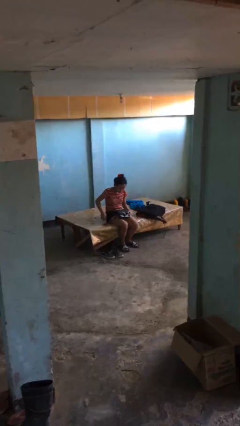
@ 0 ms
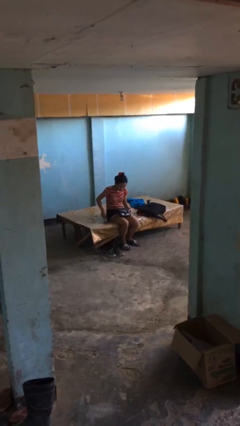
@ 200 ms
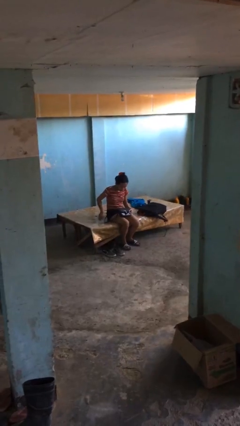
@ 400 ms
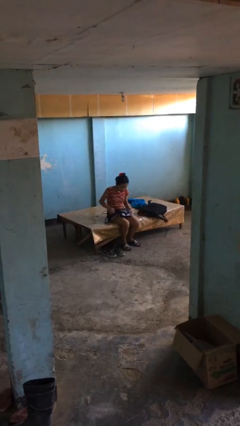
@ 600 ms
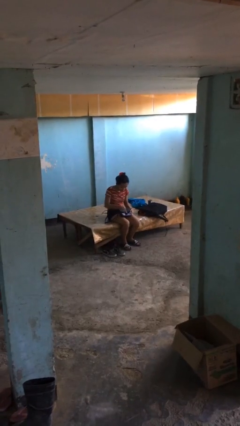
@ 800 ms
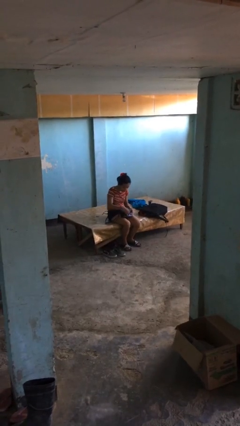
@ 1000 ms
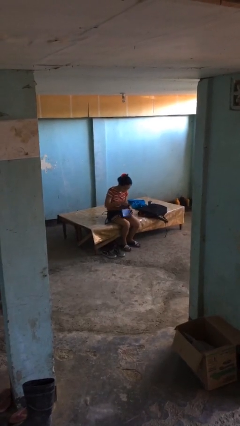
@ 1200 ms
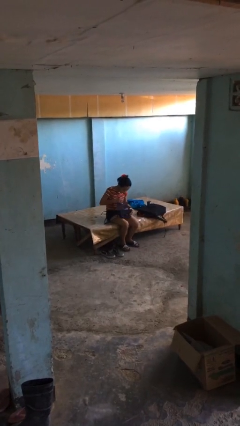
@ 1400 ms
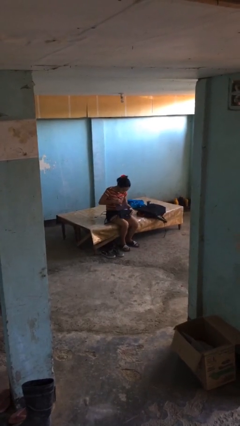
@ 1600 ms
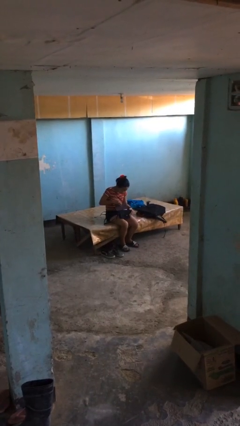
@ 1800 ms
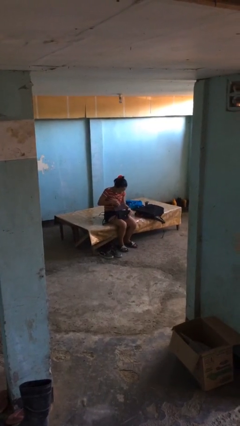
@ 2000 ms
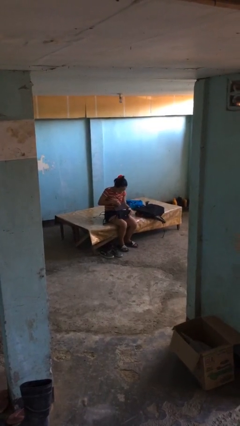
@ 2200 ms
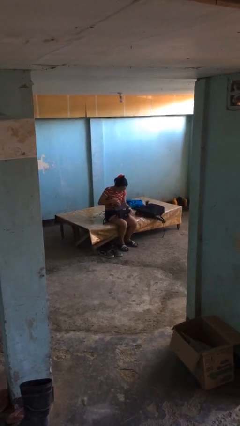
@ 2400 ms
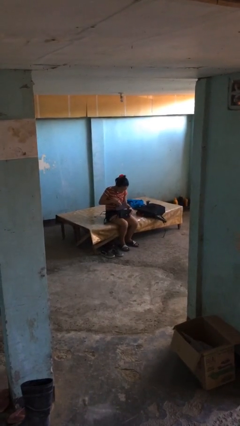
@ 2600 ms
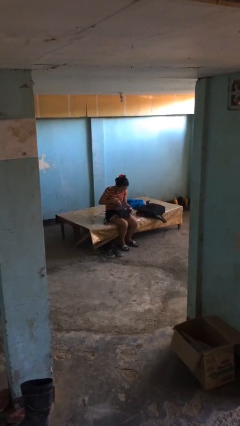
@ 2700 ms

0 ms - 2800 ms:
person searches in purse

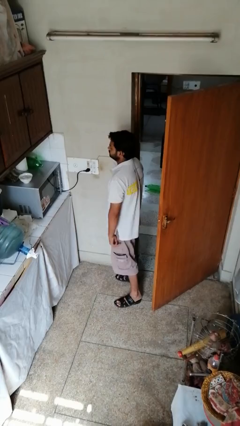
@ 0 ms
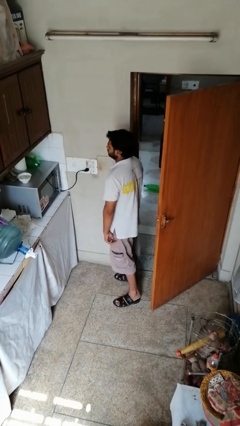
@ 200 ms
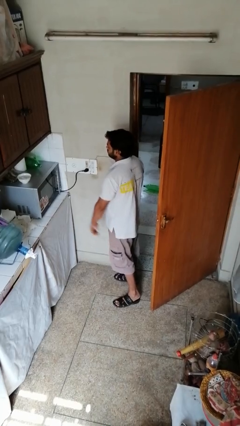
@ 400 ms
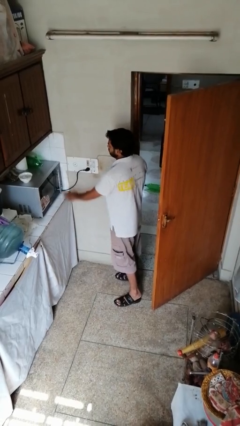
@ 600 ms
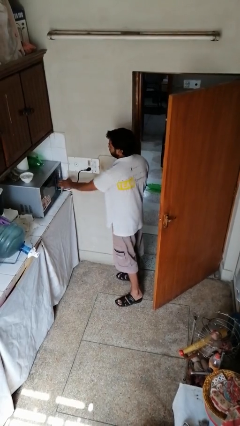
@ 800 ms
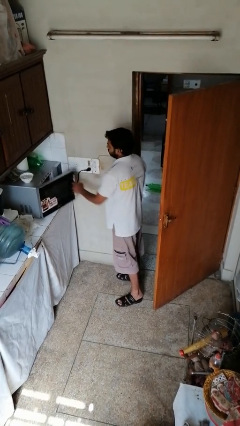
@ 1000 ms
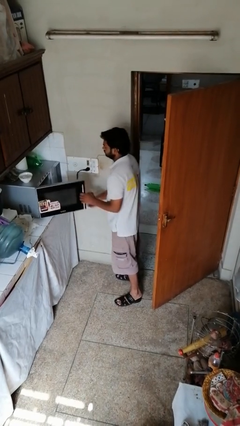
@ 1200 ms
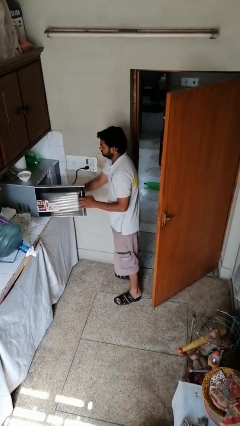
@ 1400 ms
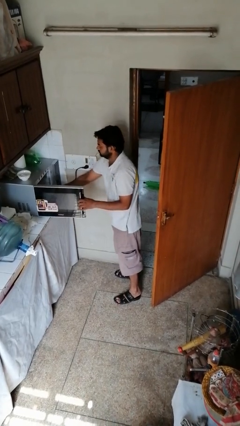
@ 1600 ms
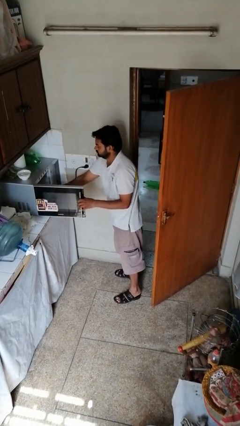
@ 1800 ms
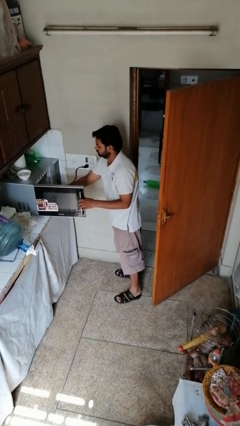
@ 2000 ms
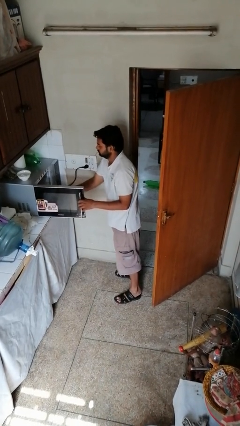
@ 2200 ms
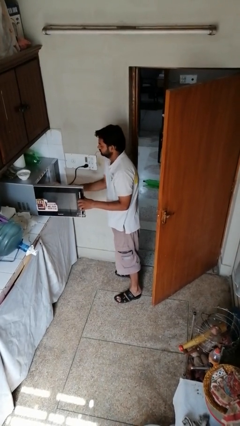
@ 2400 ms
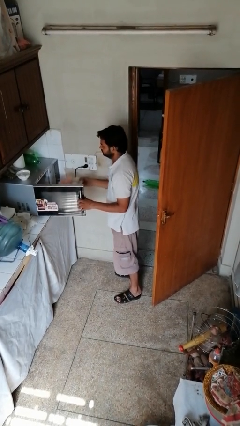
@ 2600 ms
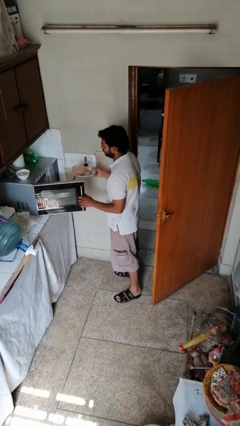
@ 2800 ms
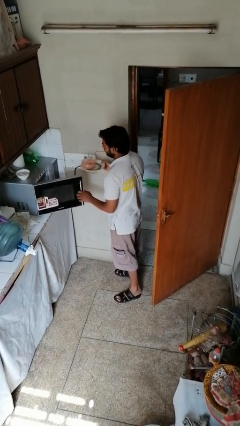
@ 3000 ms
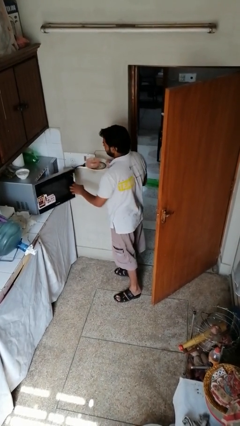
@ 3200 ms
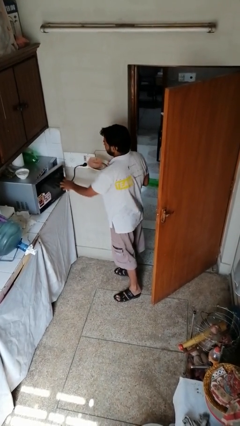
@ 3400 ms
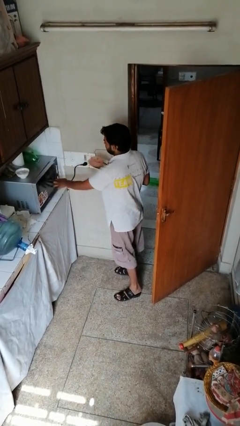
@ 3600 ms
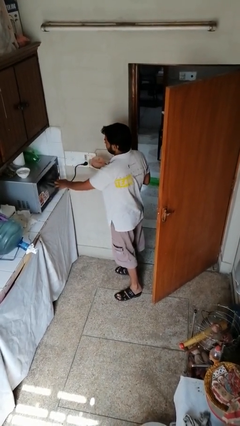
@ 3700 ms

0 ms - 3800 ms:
person takes object from microwave

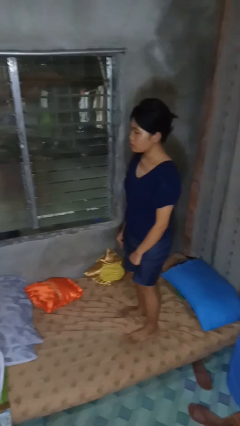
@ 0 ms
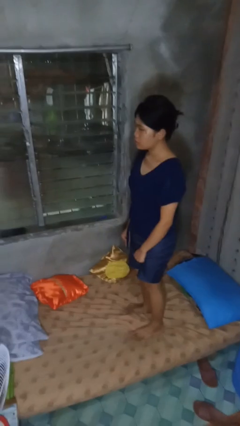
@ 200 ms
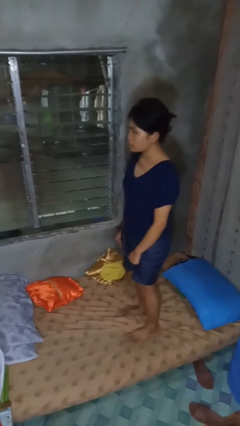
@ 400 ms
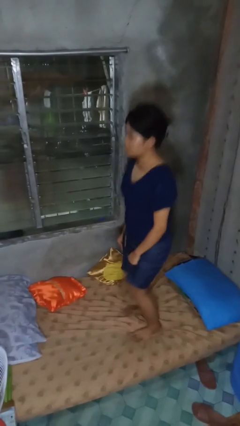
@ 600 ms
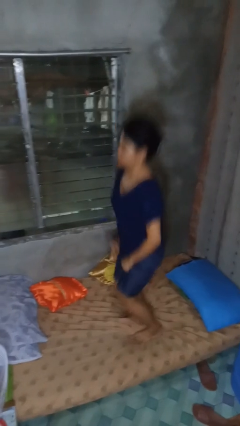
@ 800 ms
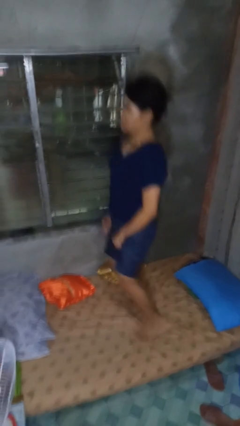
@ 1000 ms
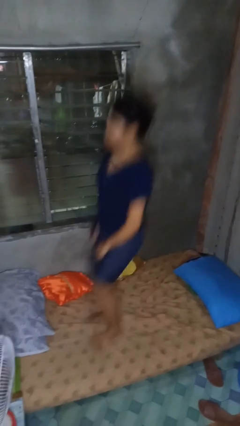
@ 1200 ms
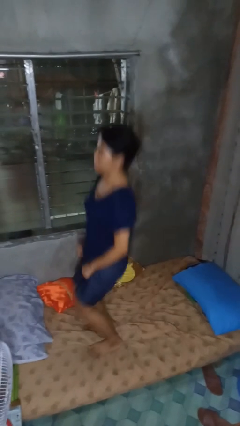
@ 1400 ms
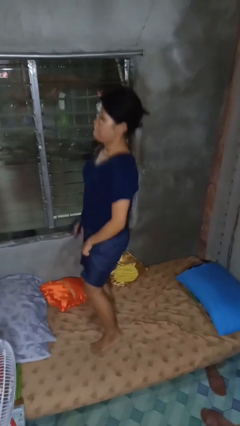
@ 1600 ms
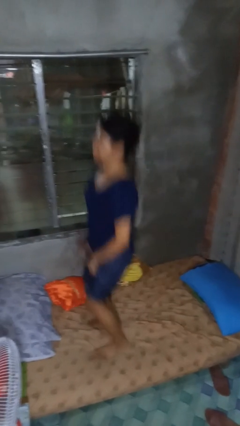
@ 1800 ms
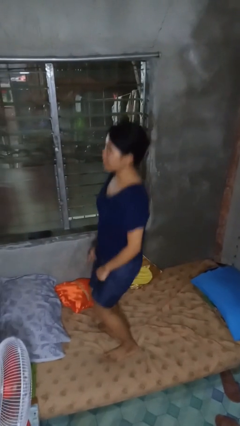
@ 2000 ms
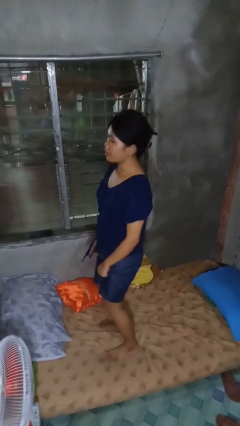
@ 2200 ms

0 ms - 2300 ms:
person jumps on bed

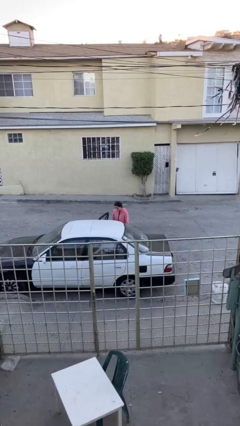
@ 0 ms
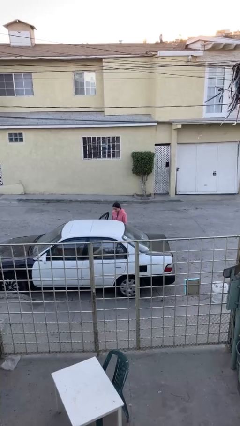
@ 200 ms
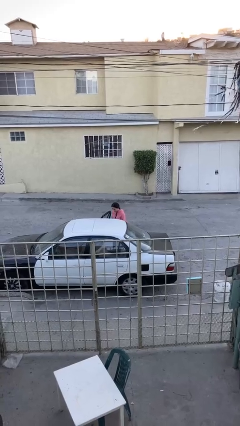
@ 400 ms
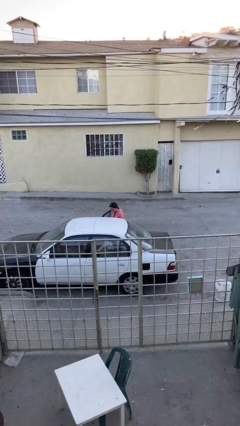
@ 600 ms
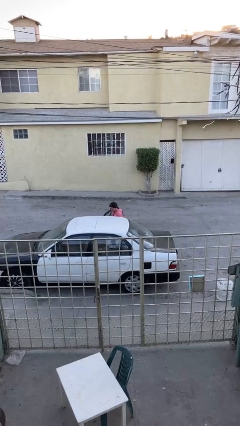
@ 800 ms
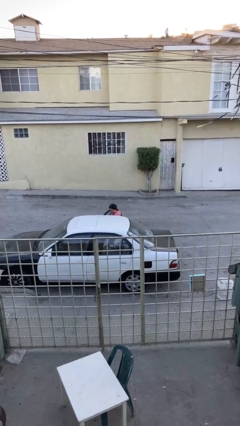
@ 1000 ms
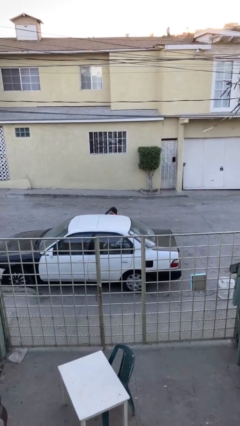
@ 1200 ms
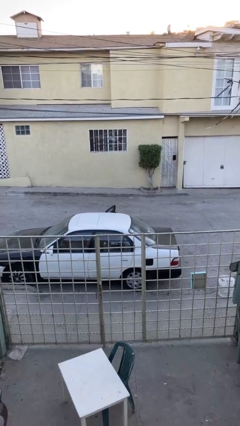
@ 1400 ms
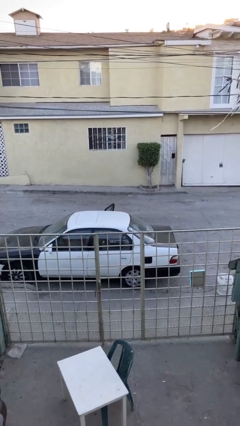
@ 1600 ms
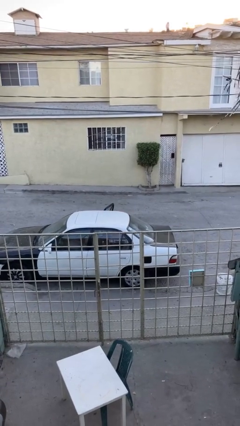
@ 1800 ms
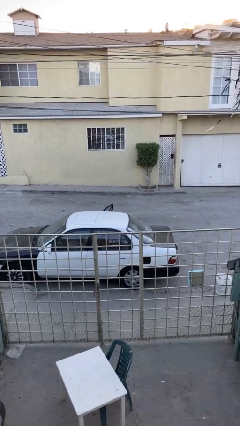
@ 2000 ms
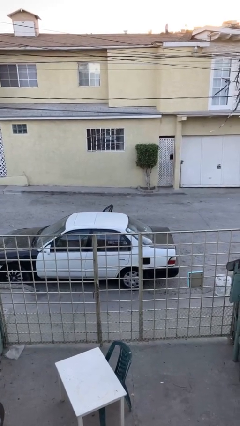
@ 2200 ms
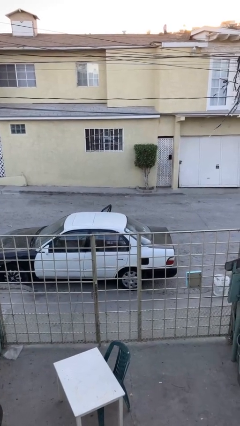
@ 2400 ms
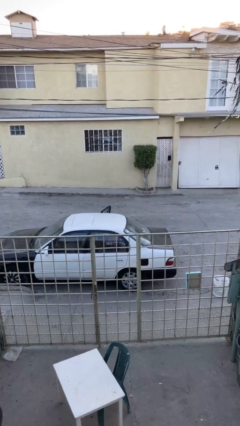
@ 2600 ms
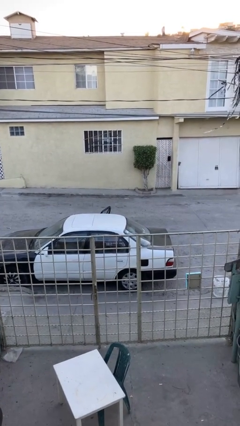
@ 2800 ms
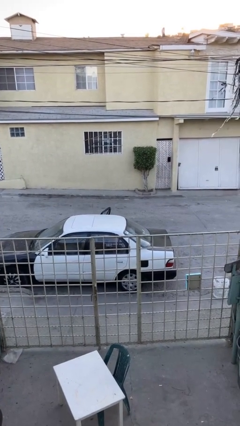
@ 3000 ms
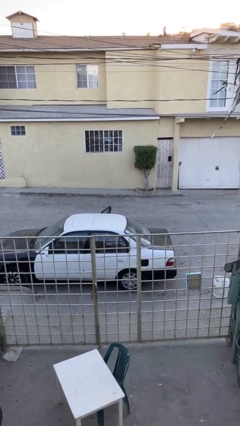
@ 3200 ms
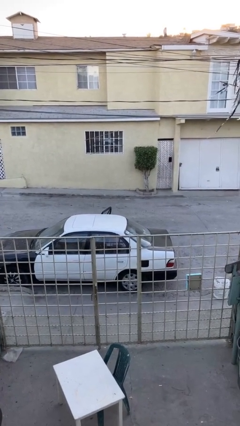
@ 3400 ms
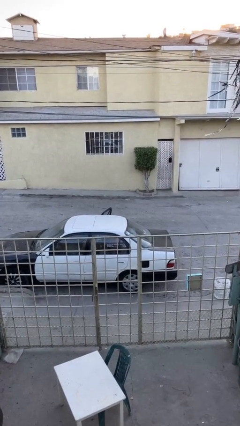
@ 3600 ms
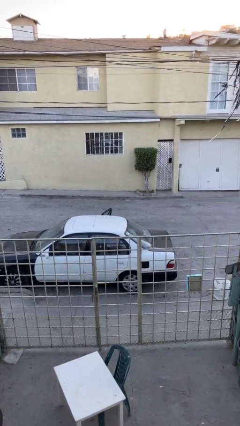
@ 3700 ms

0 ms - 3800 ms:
person enters car

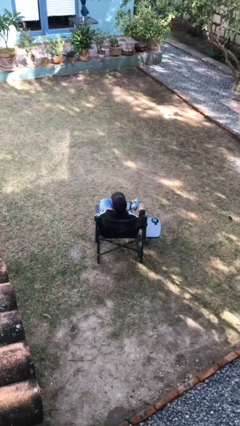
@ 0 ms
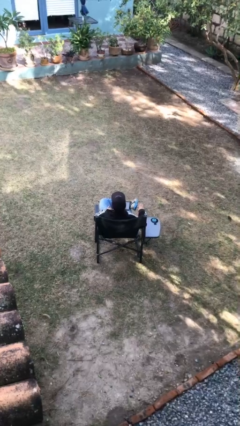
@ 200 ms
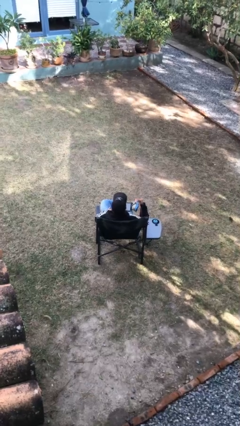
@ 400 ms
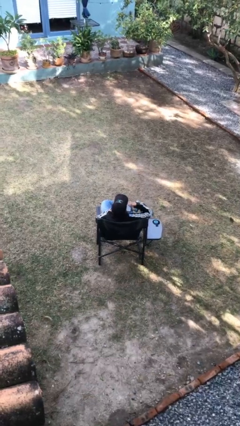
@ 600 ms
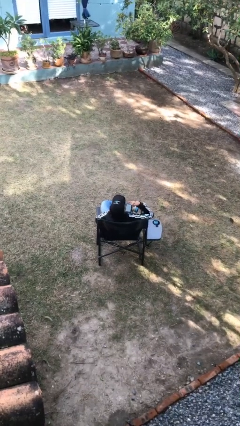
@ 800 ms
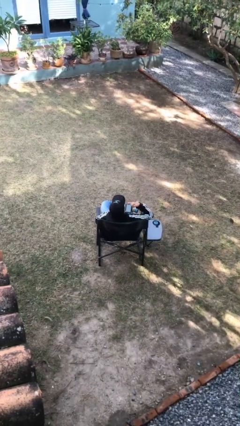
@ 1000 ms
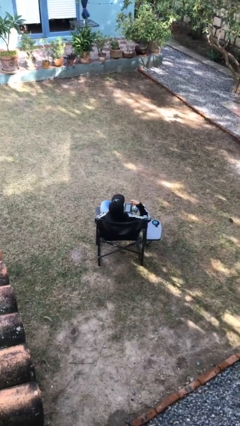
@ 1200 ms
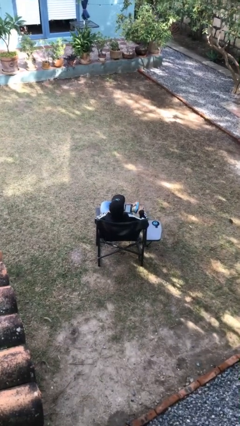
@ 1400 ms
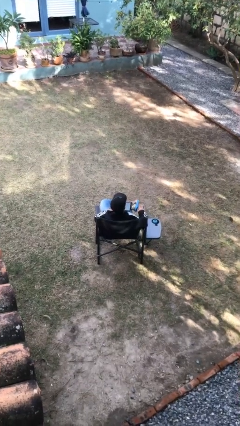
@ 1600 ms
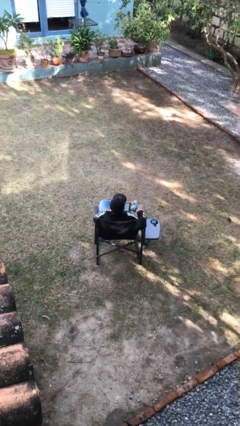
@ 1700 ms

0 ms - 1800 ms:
person gestures call me

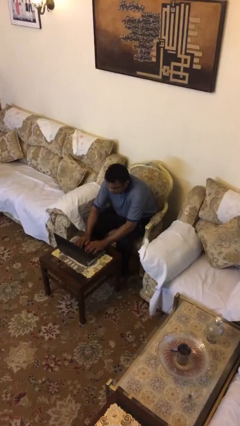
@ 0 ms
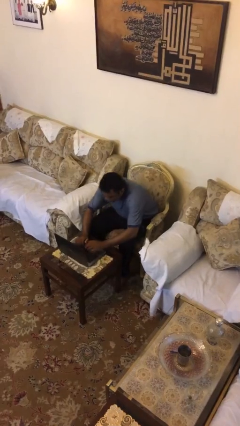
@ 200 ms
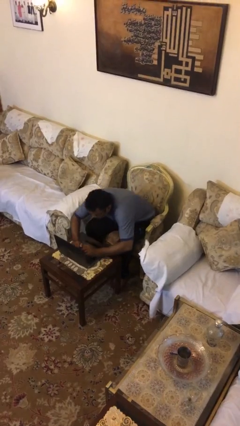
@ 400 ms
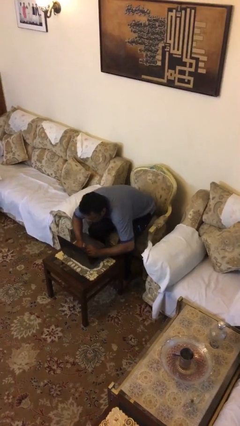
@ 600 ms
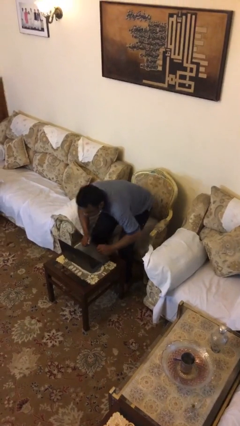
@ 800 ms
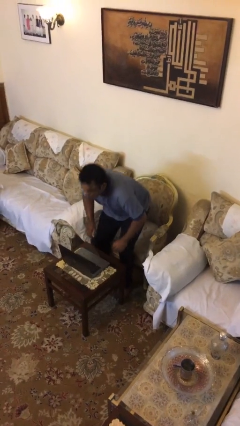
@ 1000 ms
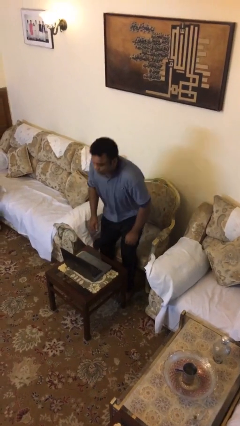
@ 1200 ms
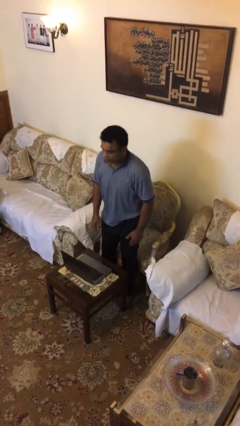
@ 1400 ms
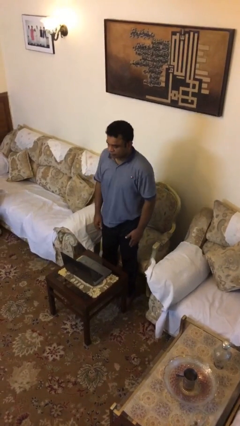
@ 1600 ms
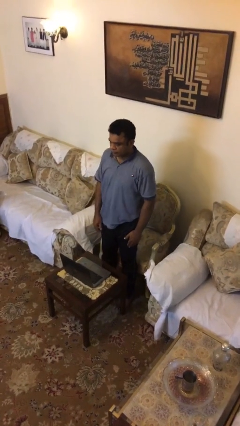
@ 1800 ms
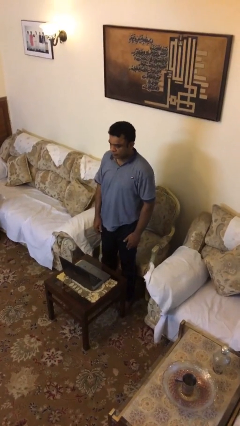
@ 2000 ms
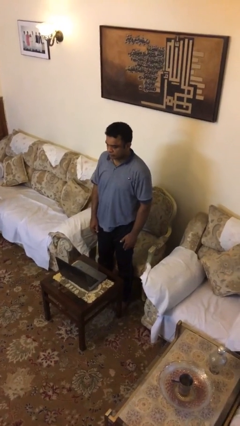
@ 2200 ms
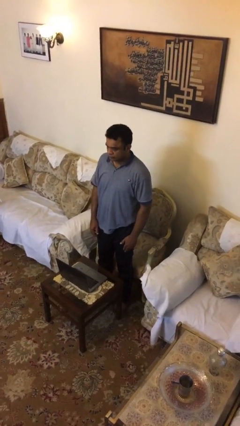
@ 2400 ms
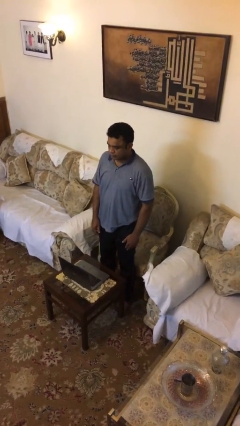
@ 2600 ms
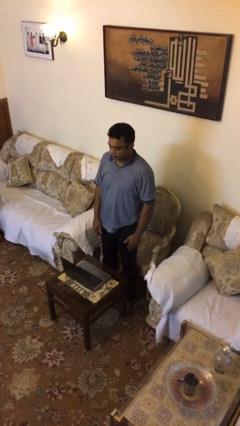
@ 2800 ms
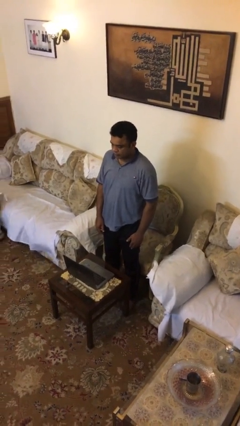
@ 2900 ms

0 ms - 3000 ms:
person stands up
